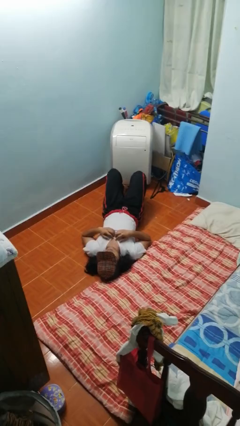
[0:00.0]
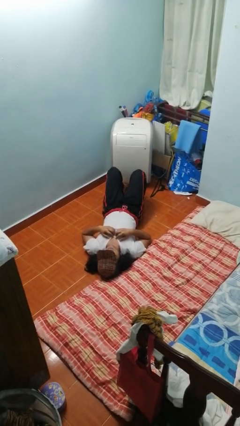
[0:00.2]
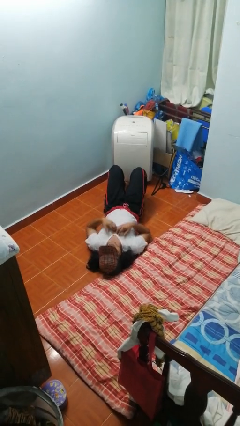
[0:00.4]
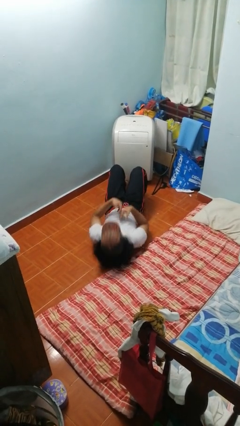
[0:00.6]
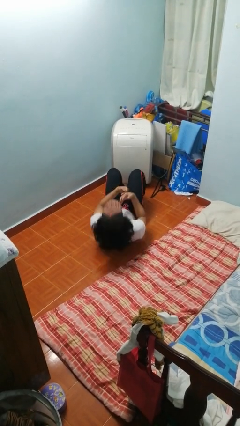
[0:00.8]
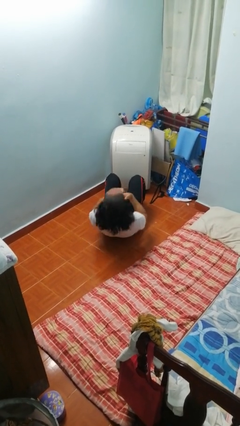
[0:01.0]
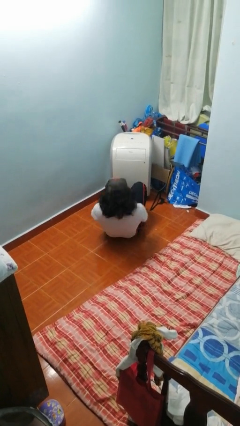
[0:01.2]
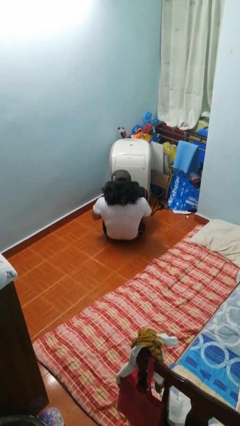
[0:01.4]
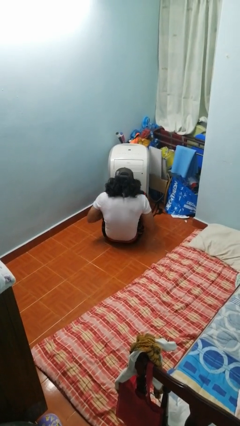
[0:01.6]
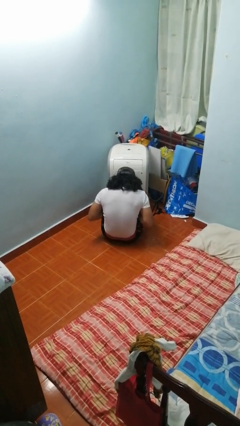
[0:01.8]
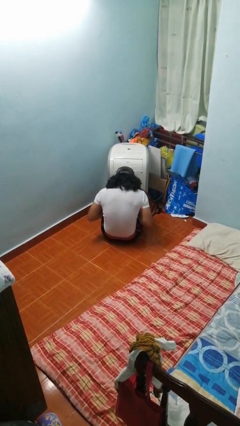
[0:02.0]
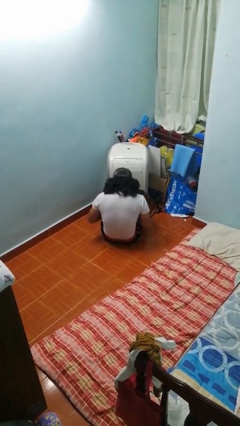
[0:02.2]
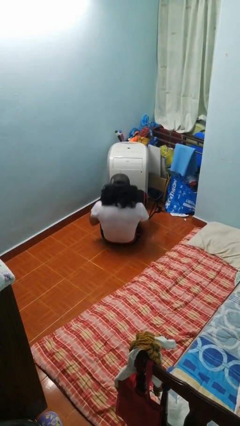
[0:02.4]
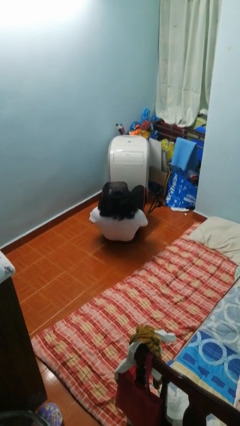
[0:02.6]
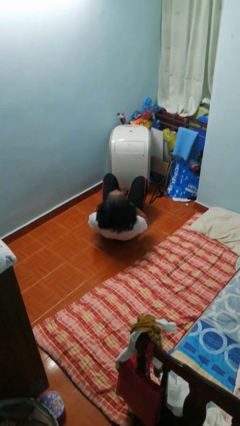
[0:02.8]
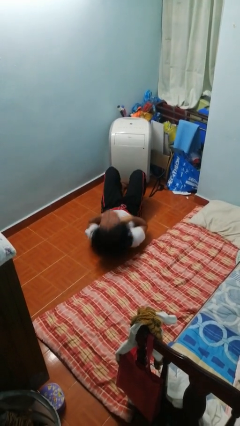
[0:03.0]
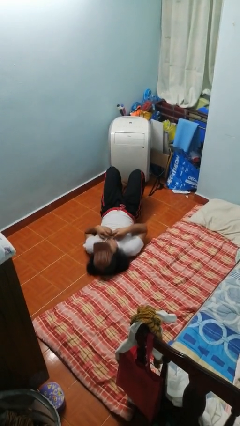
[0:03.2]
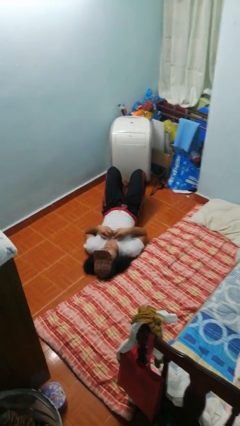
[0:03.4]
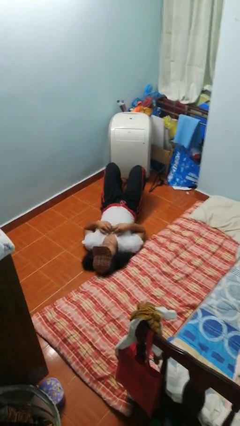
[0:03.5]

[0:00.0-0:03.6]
person exercises with situp

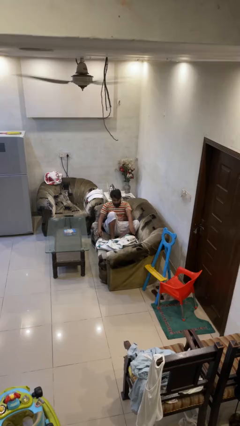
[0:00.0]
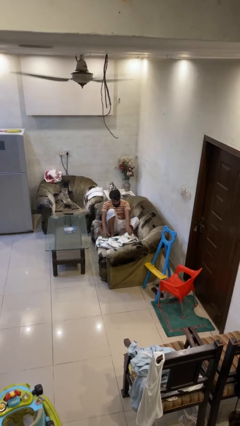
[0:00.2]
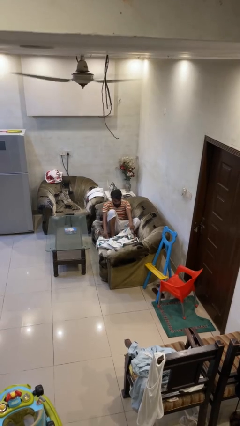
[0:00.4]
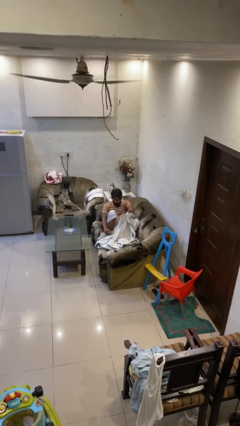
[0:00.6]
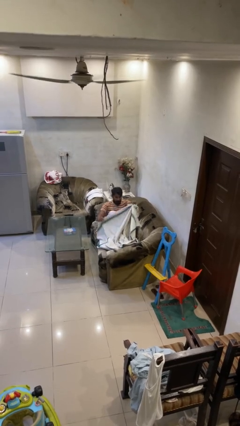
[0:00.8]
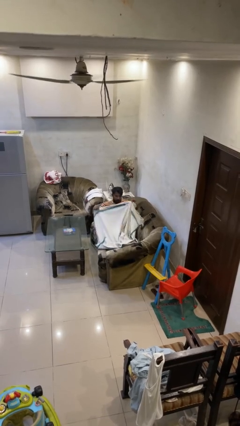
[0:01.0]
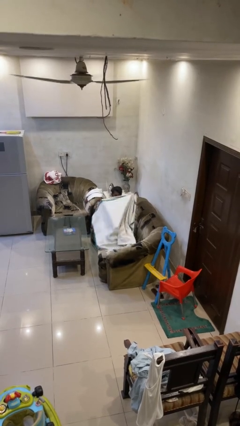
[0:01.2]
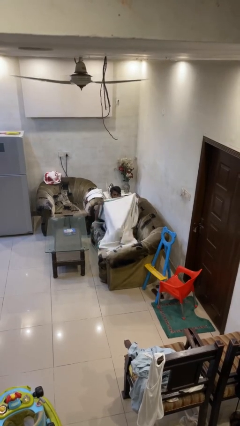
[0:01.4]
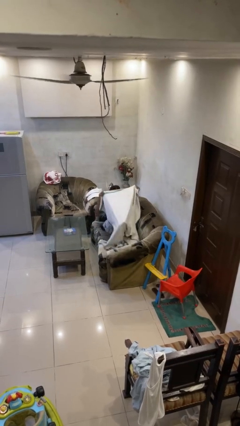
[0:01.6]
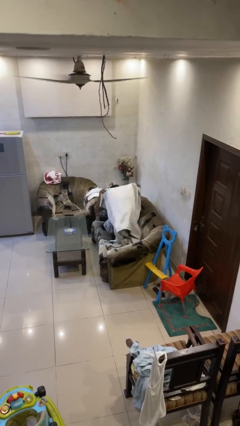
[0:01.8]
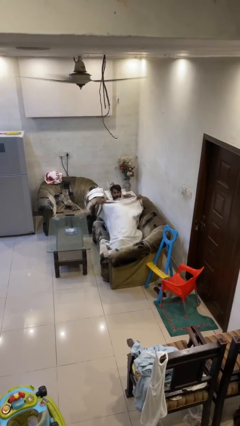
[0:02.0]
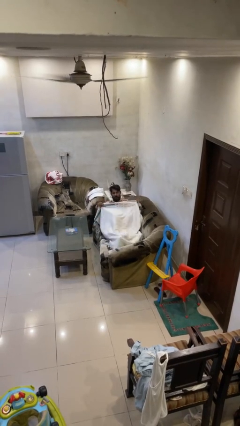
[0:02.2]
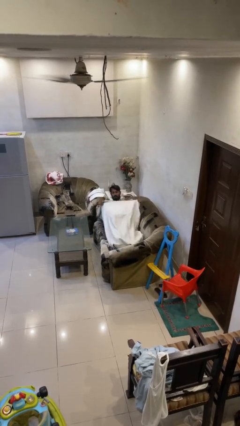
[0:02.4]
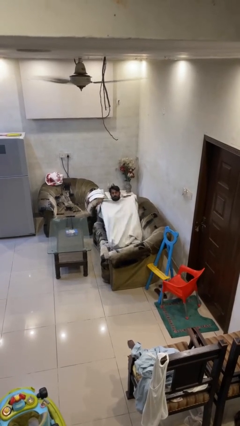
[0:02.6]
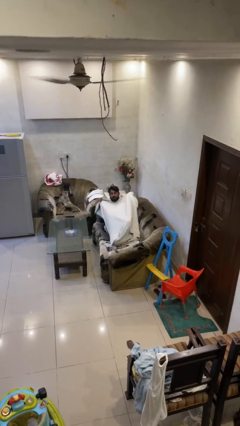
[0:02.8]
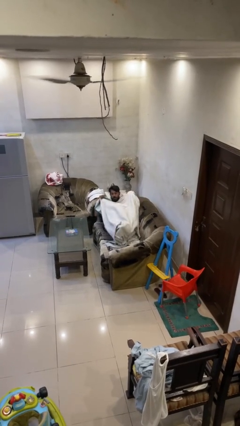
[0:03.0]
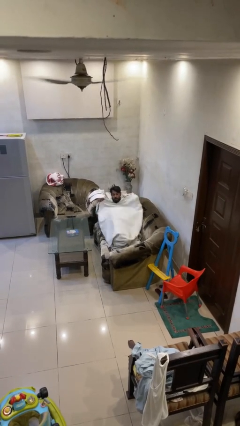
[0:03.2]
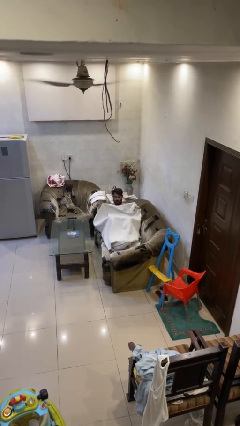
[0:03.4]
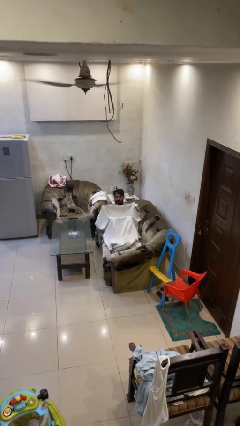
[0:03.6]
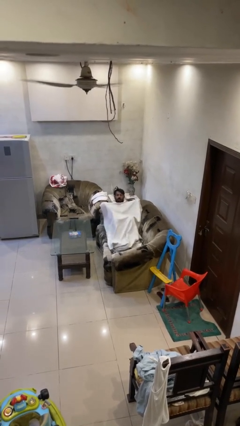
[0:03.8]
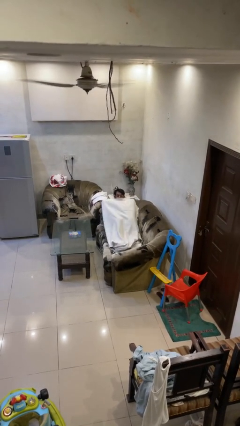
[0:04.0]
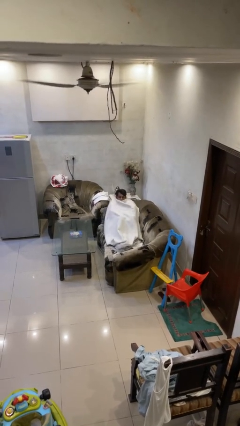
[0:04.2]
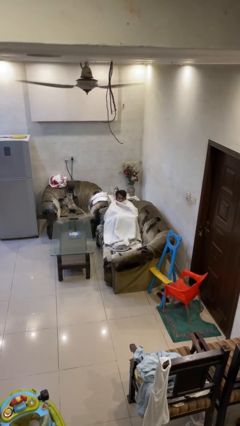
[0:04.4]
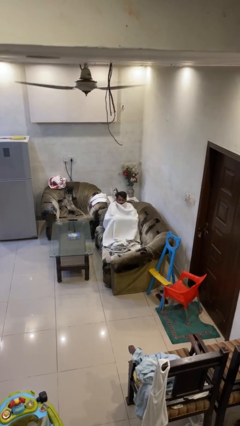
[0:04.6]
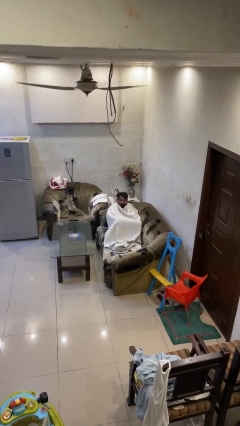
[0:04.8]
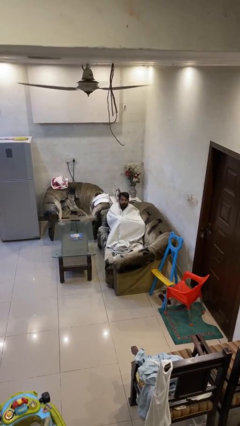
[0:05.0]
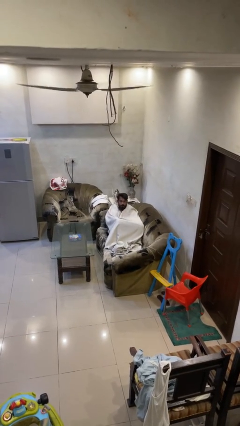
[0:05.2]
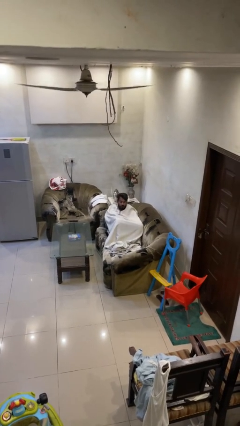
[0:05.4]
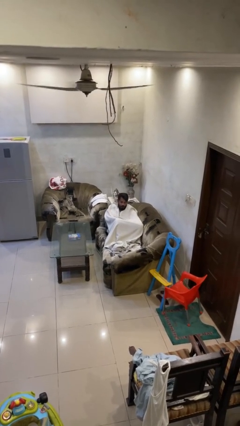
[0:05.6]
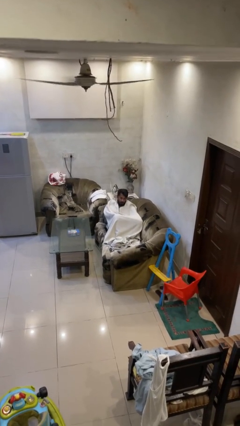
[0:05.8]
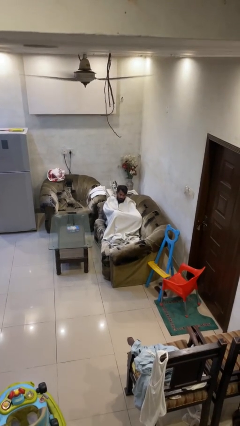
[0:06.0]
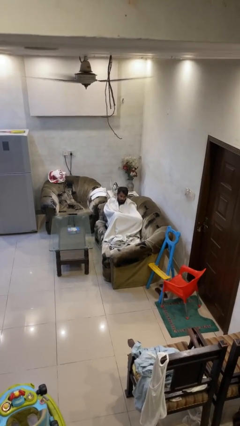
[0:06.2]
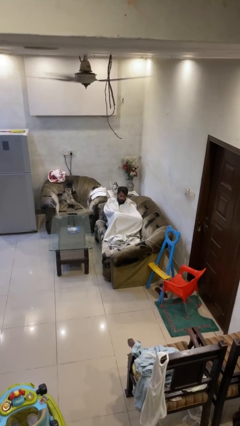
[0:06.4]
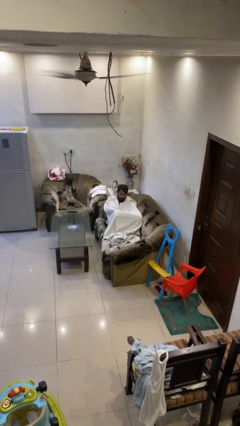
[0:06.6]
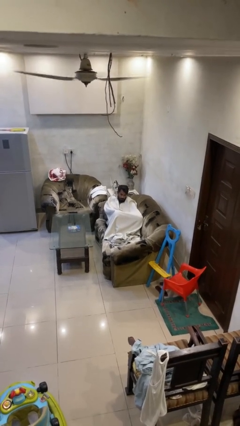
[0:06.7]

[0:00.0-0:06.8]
person covers with blanket

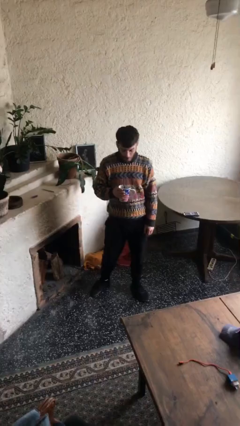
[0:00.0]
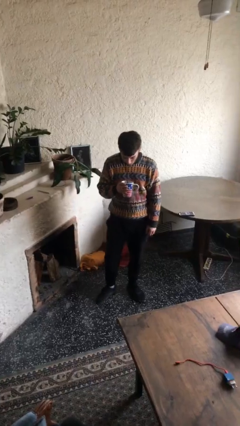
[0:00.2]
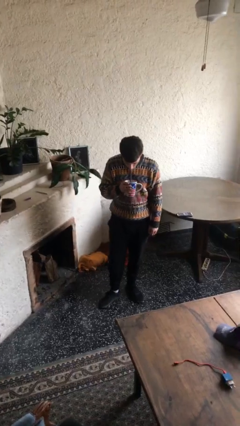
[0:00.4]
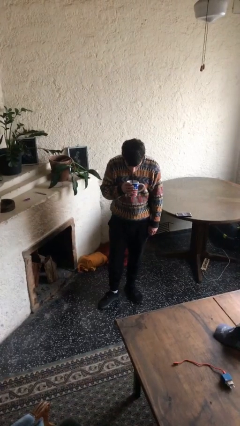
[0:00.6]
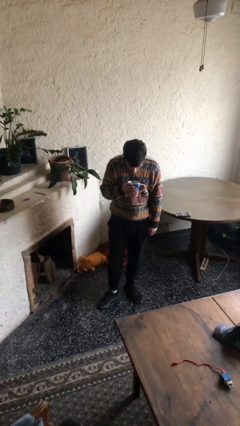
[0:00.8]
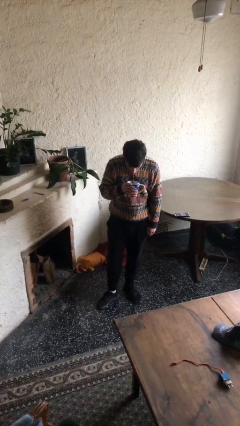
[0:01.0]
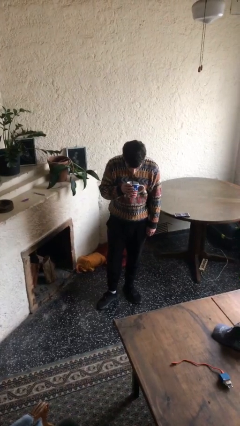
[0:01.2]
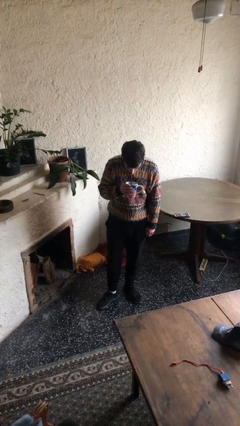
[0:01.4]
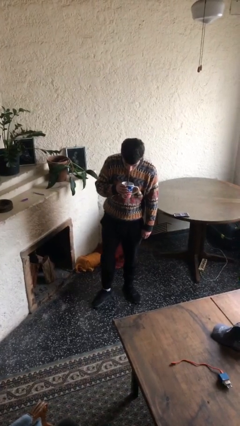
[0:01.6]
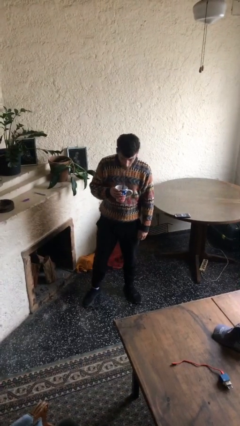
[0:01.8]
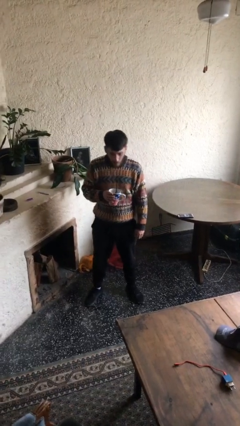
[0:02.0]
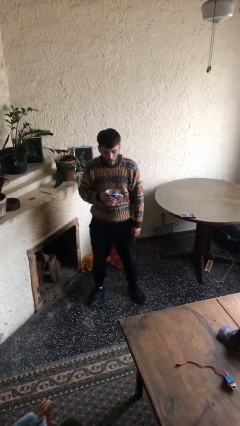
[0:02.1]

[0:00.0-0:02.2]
person drinks from straw

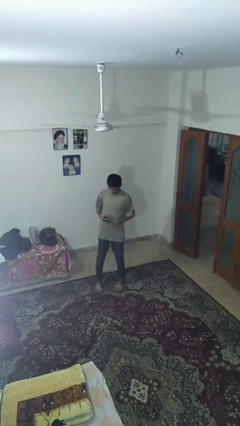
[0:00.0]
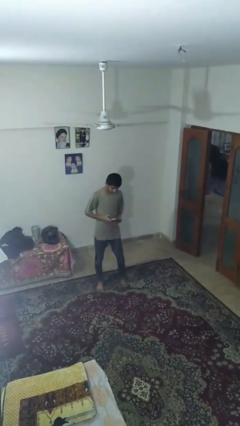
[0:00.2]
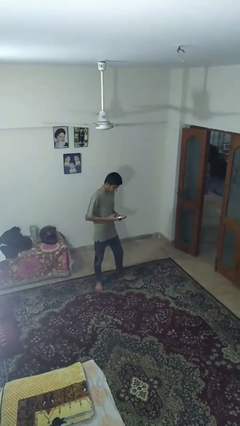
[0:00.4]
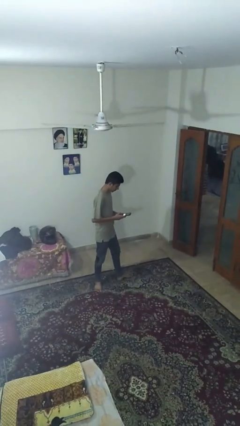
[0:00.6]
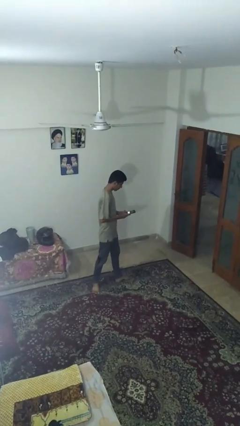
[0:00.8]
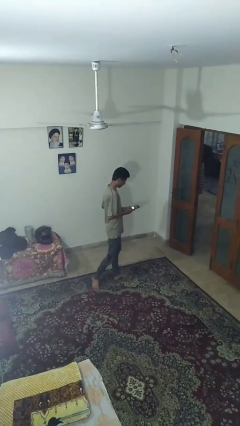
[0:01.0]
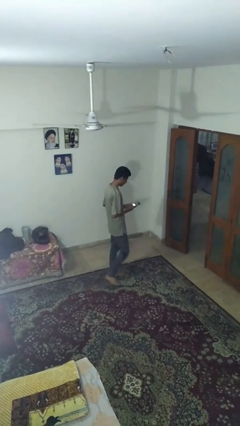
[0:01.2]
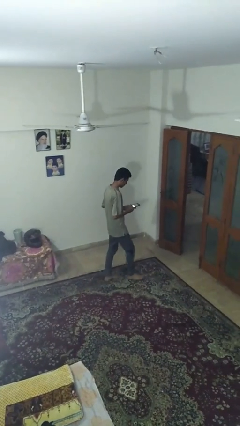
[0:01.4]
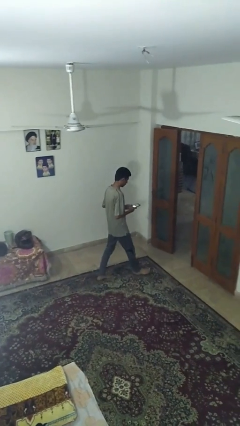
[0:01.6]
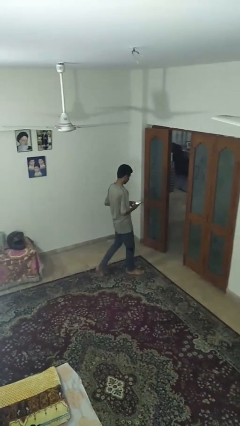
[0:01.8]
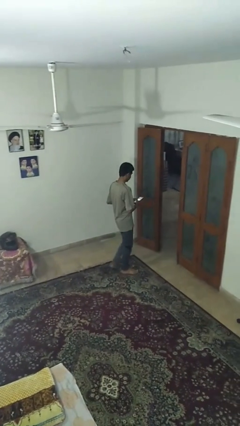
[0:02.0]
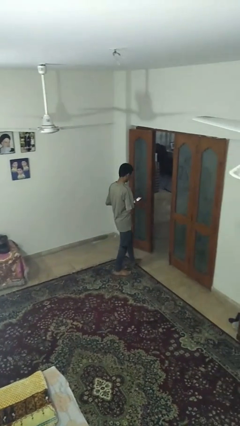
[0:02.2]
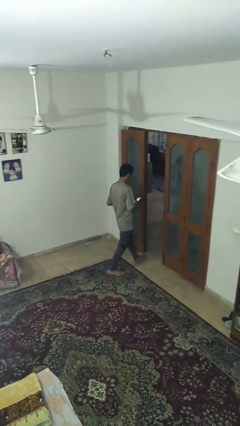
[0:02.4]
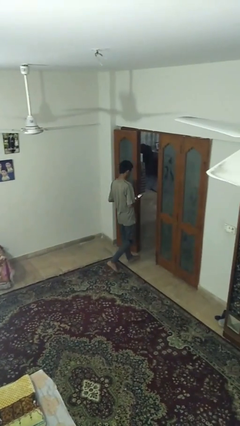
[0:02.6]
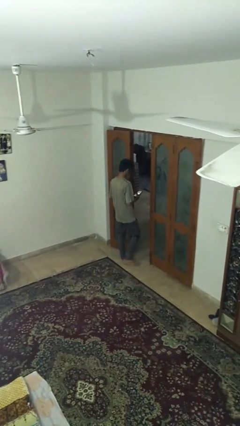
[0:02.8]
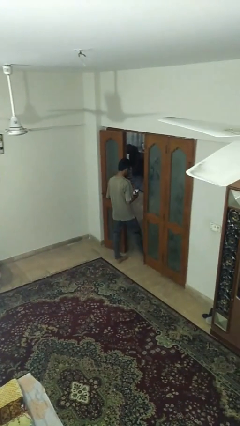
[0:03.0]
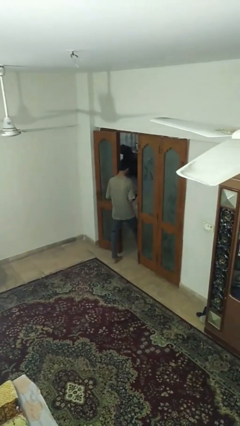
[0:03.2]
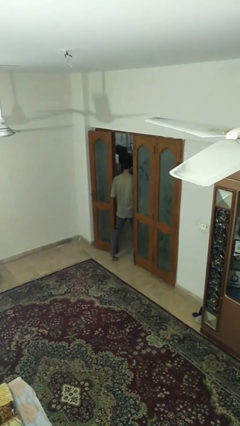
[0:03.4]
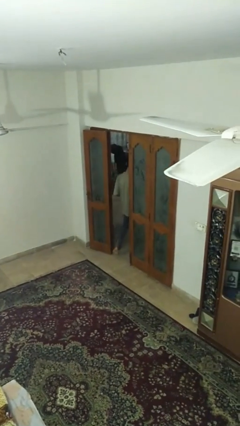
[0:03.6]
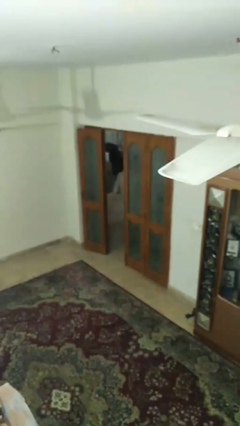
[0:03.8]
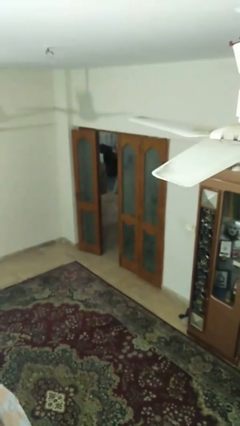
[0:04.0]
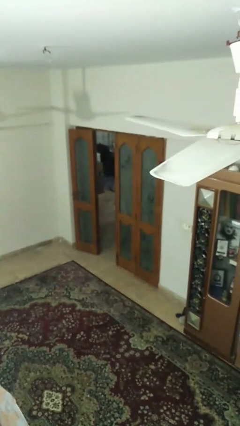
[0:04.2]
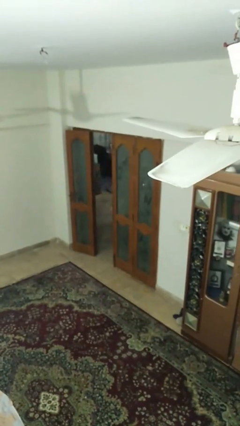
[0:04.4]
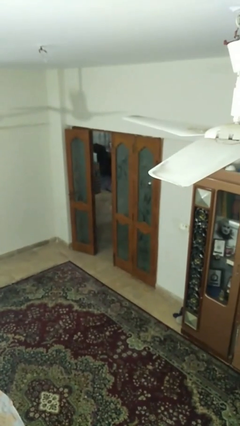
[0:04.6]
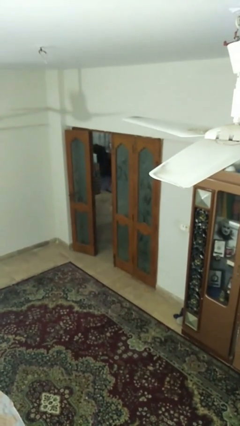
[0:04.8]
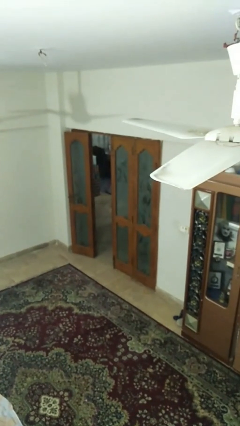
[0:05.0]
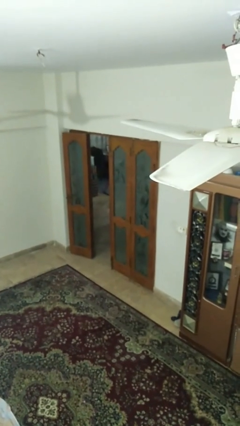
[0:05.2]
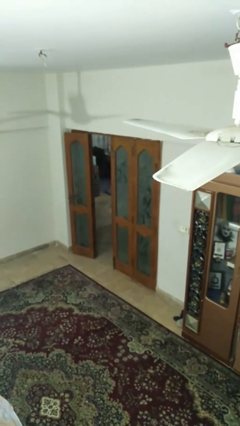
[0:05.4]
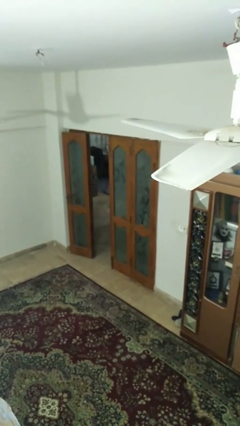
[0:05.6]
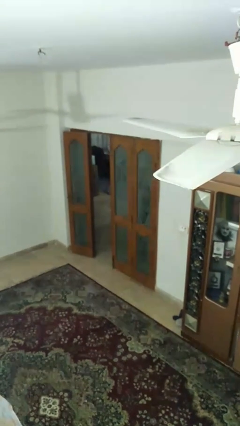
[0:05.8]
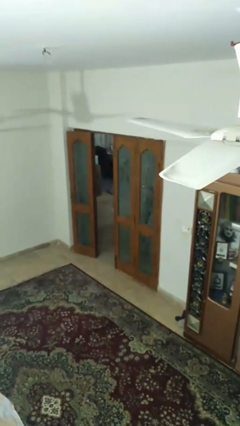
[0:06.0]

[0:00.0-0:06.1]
person exits scene through structure
